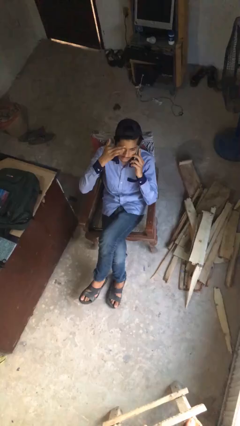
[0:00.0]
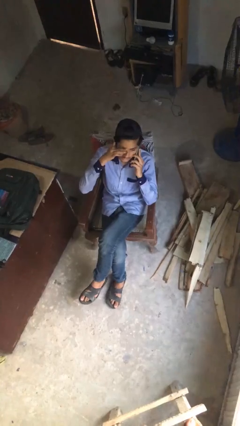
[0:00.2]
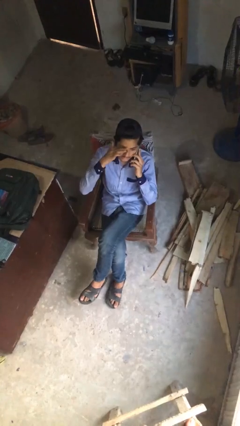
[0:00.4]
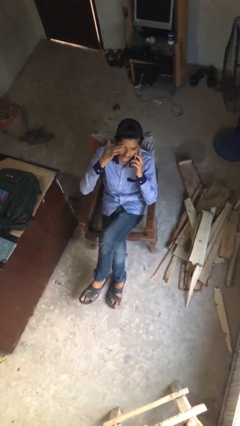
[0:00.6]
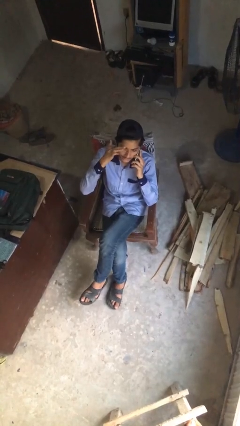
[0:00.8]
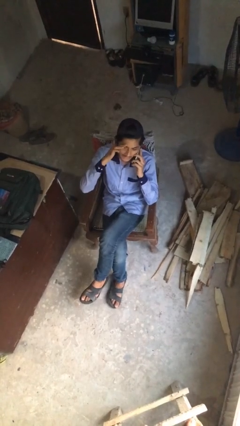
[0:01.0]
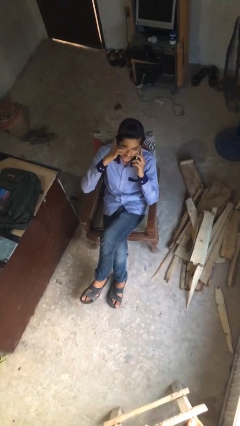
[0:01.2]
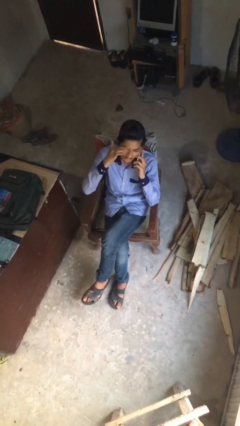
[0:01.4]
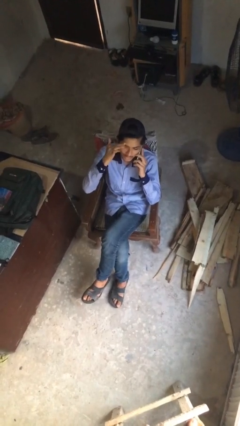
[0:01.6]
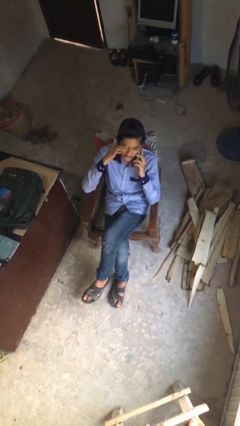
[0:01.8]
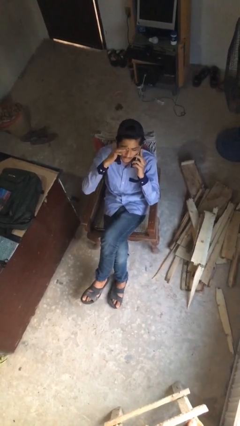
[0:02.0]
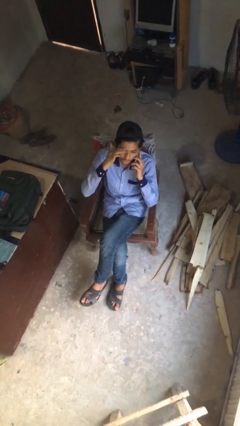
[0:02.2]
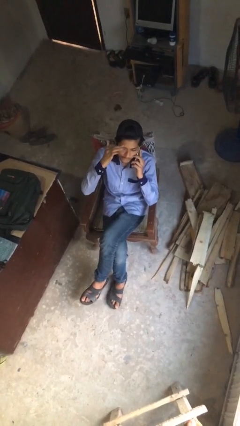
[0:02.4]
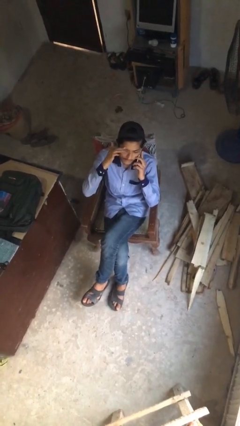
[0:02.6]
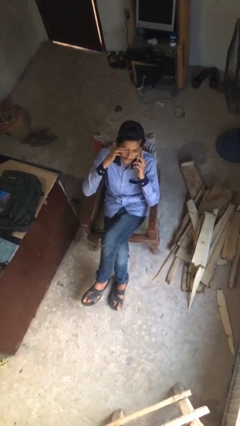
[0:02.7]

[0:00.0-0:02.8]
person talks on phone

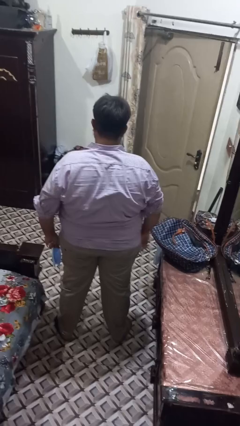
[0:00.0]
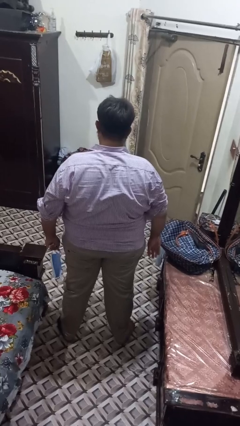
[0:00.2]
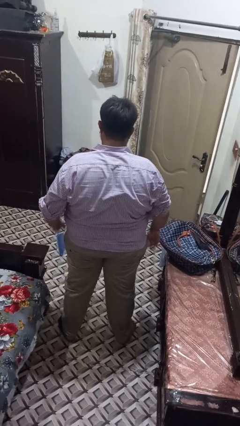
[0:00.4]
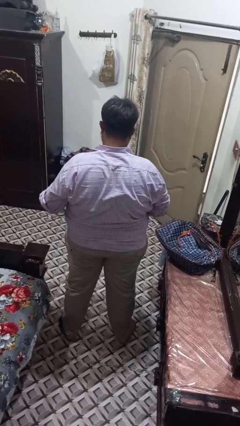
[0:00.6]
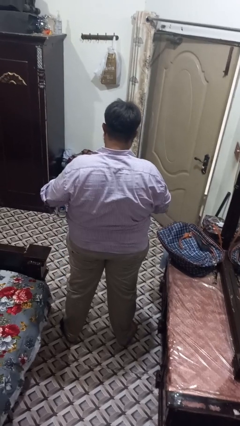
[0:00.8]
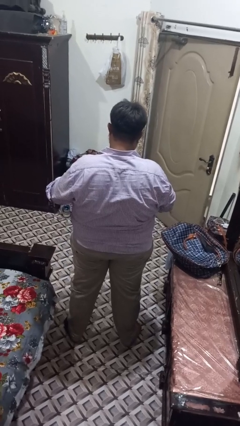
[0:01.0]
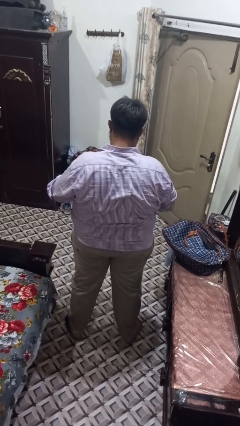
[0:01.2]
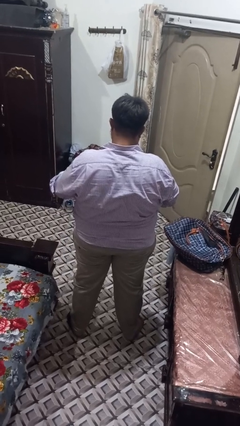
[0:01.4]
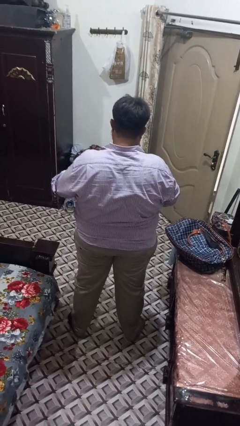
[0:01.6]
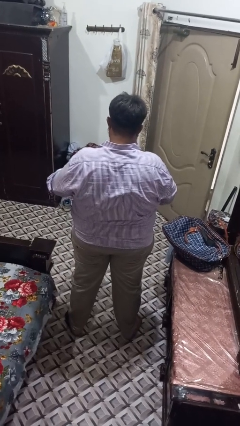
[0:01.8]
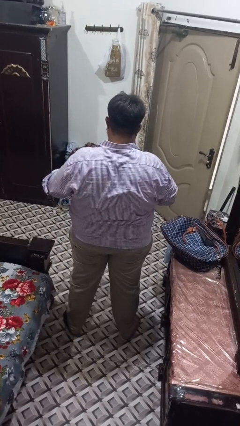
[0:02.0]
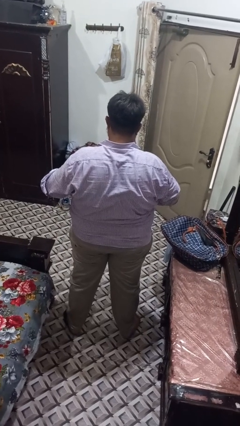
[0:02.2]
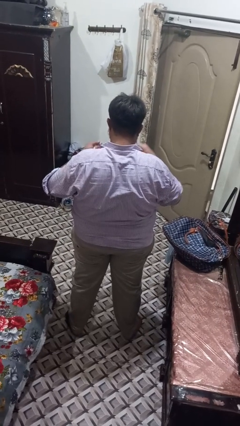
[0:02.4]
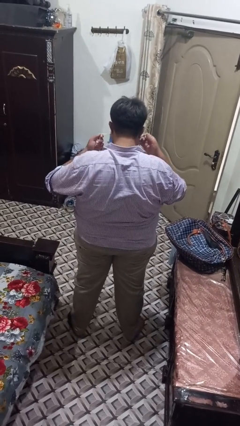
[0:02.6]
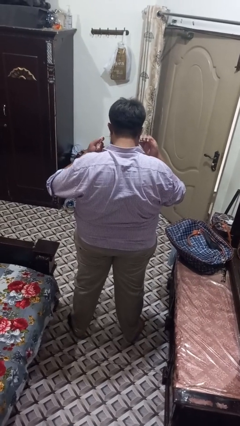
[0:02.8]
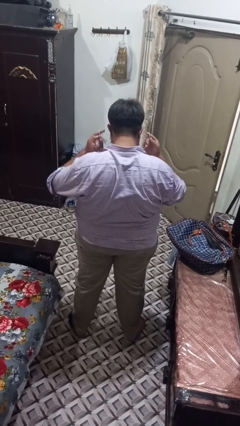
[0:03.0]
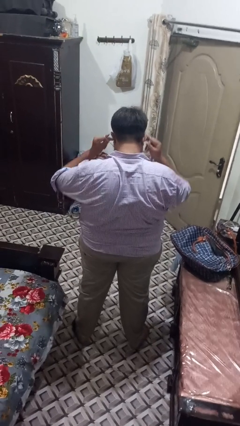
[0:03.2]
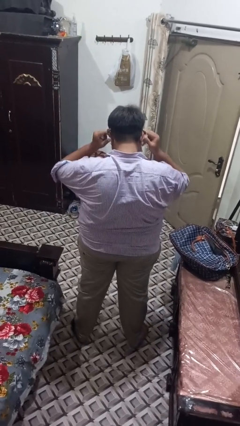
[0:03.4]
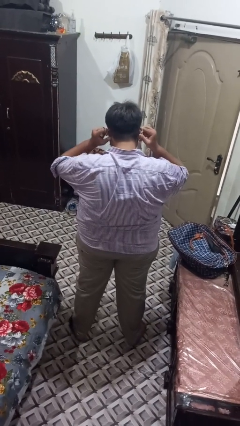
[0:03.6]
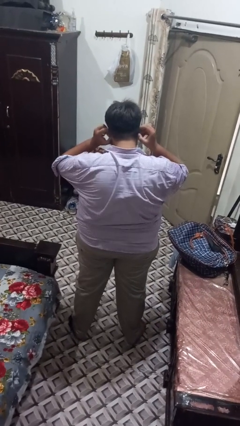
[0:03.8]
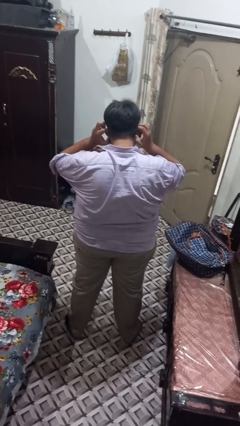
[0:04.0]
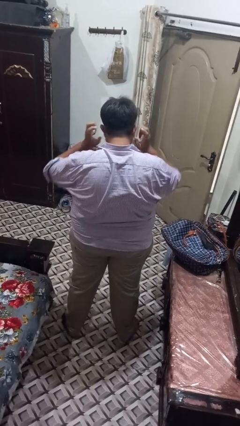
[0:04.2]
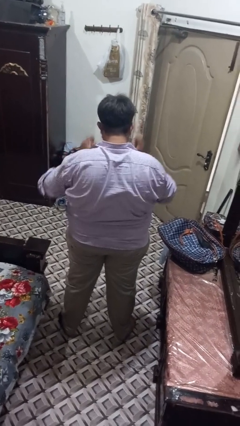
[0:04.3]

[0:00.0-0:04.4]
person puts on facemask

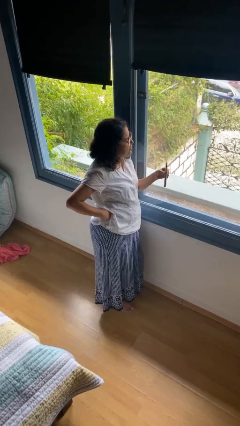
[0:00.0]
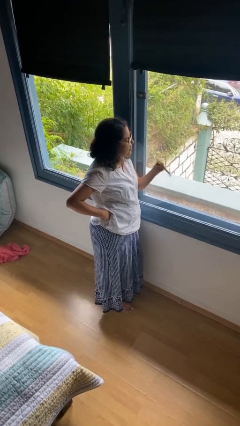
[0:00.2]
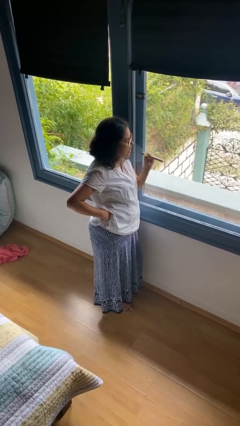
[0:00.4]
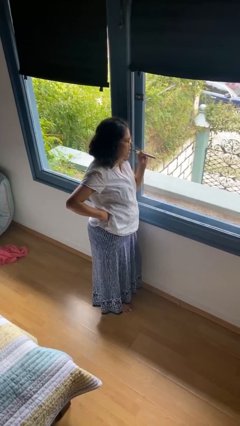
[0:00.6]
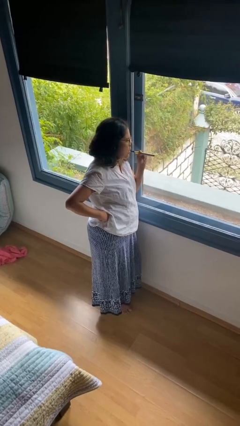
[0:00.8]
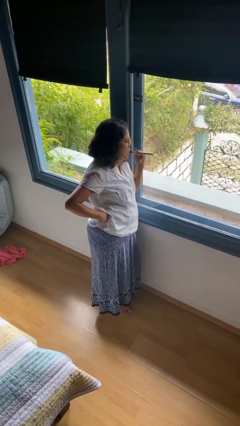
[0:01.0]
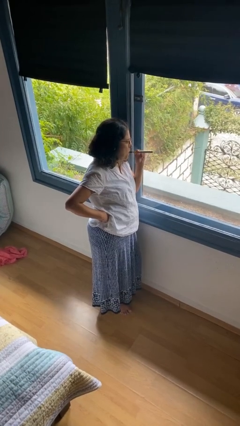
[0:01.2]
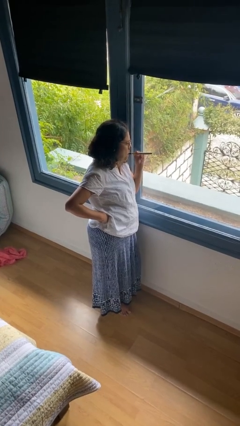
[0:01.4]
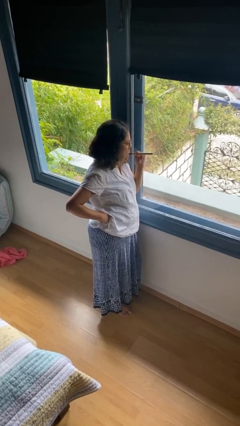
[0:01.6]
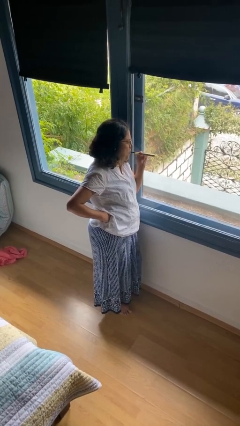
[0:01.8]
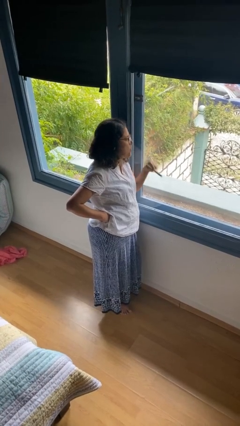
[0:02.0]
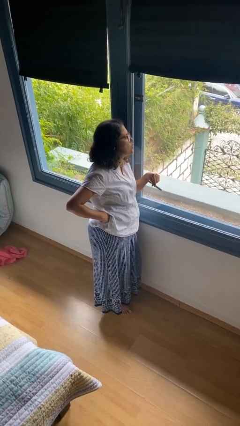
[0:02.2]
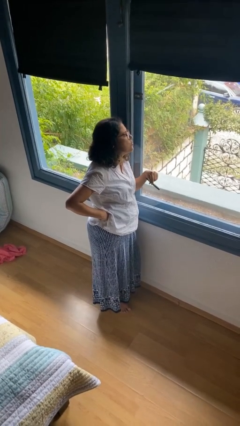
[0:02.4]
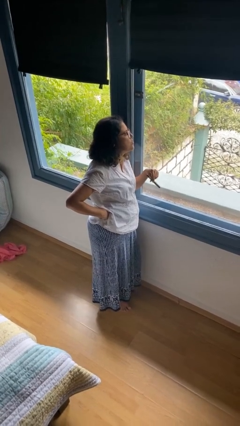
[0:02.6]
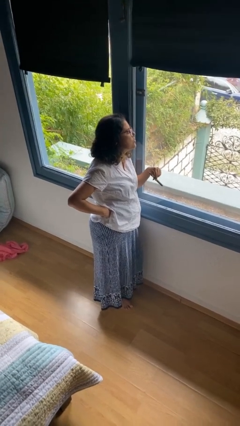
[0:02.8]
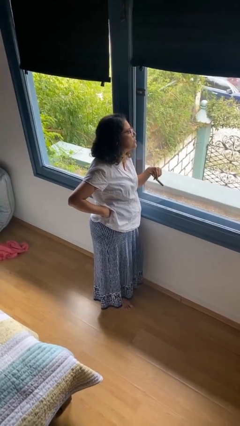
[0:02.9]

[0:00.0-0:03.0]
person vapes

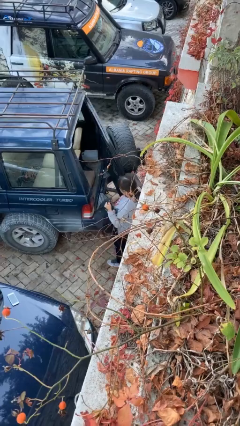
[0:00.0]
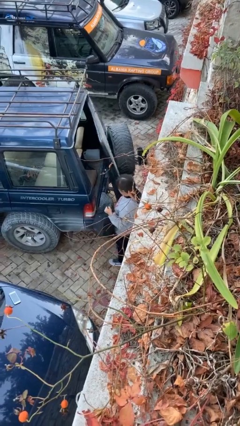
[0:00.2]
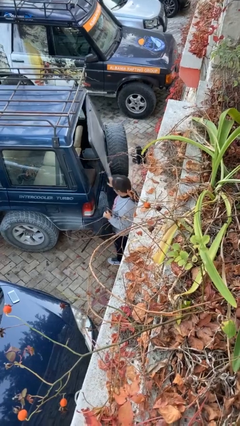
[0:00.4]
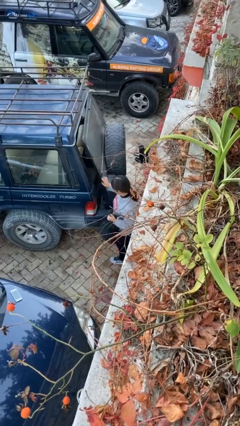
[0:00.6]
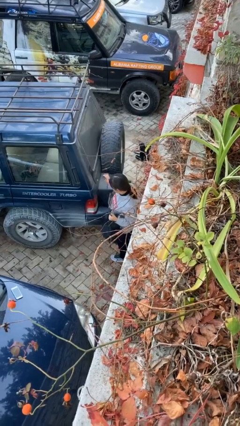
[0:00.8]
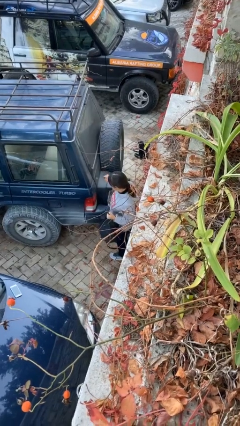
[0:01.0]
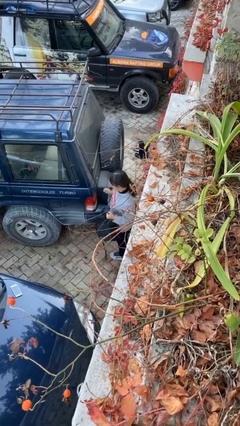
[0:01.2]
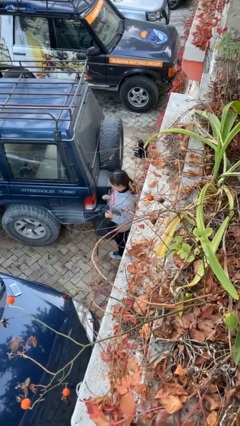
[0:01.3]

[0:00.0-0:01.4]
person closes car trunk

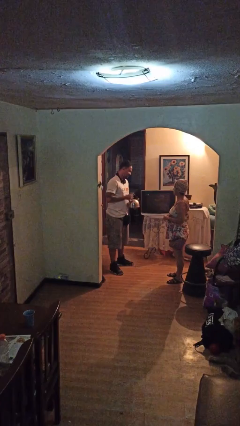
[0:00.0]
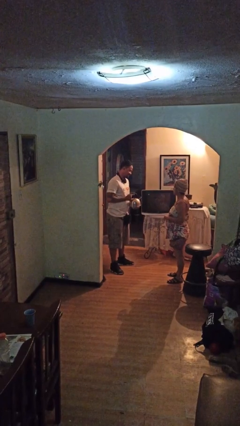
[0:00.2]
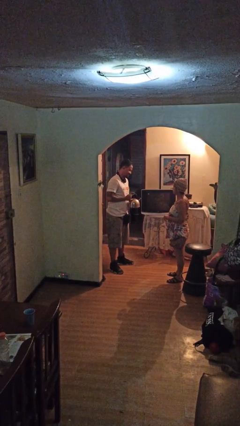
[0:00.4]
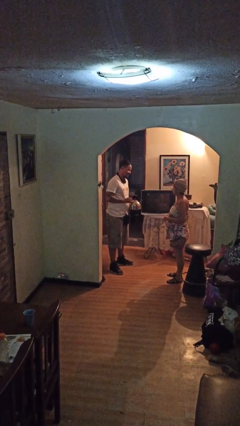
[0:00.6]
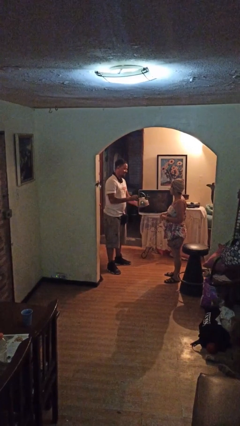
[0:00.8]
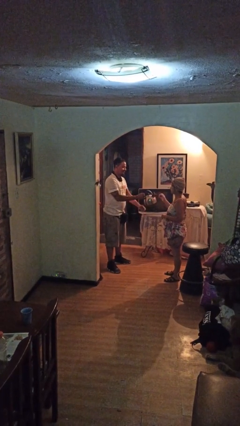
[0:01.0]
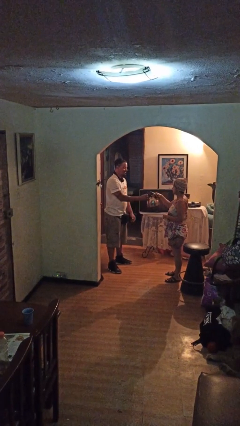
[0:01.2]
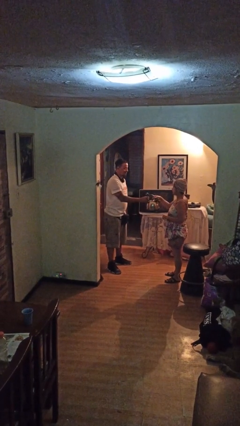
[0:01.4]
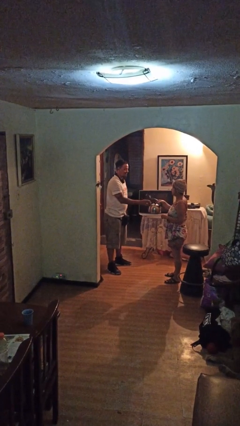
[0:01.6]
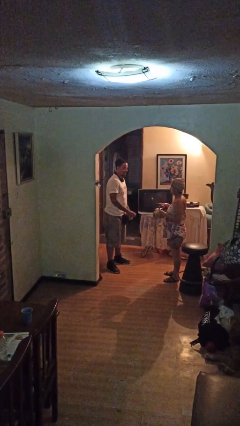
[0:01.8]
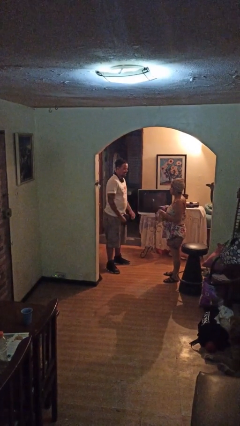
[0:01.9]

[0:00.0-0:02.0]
person transfers object to person

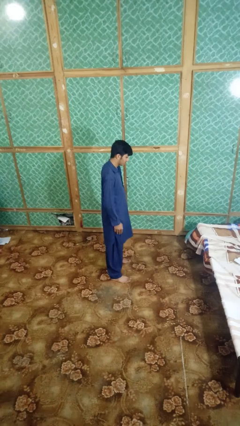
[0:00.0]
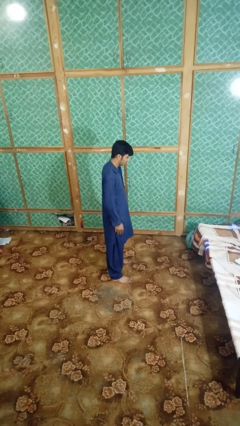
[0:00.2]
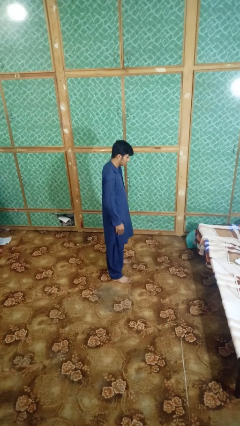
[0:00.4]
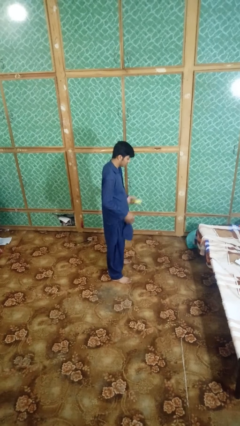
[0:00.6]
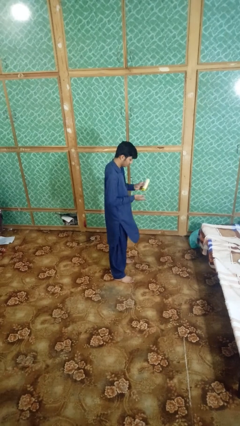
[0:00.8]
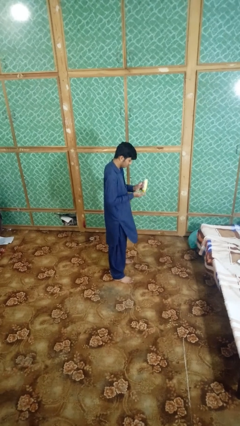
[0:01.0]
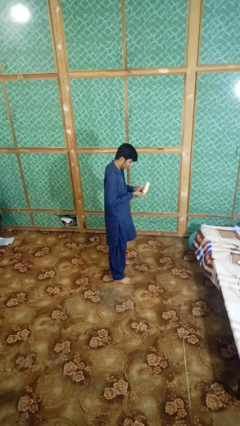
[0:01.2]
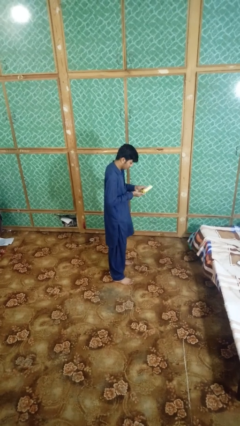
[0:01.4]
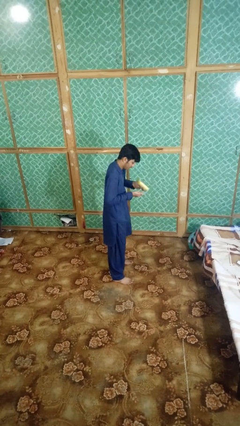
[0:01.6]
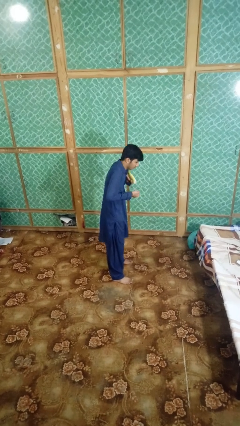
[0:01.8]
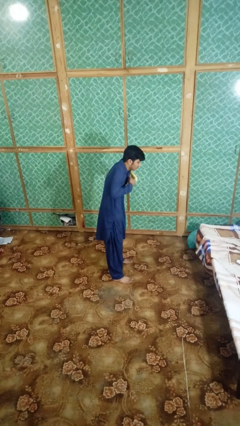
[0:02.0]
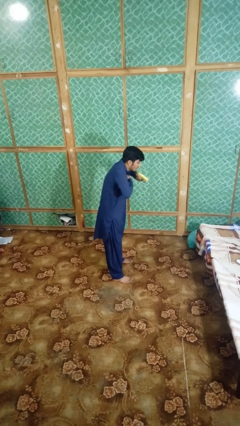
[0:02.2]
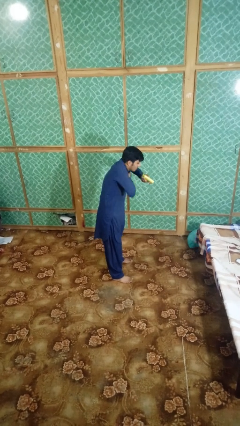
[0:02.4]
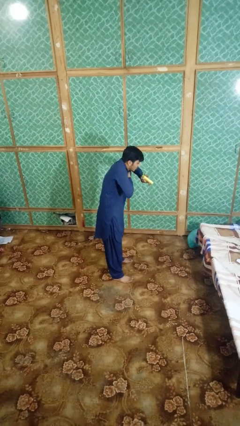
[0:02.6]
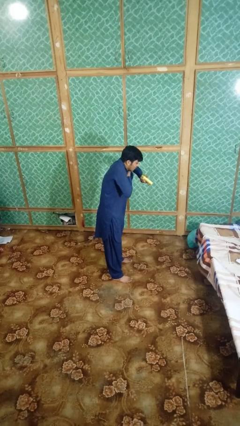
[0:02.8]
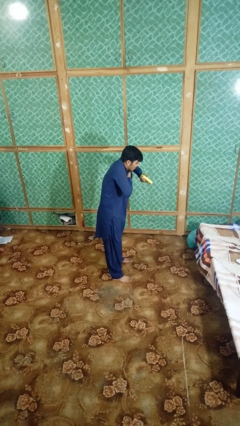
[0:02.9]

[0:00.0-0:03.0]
person applies deodorant

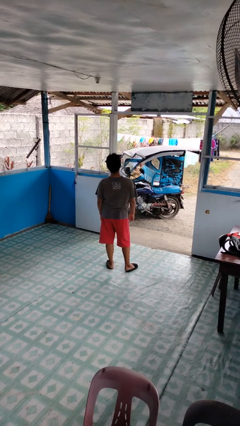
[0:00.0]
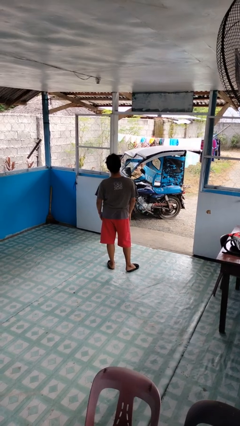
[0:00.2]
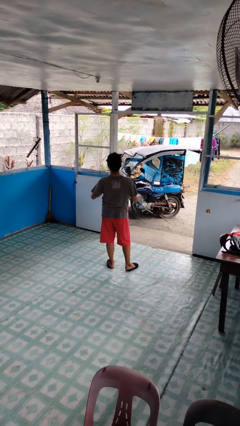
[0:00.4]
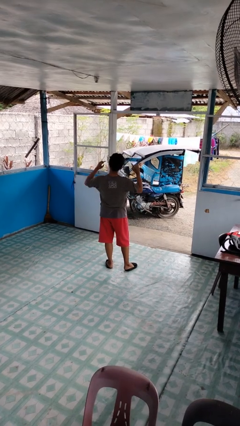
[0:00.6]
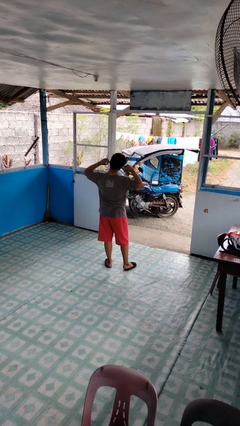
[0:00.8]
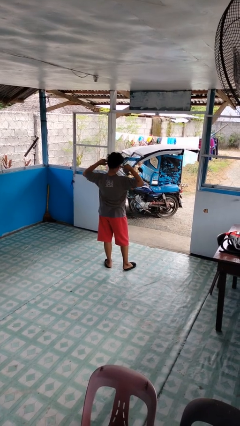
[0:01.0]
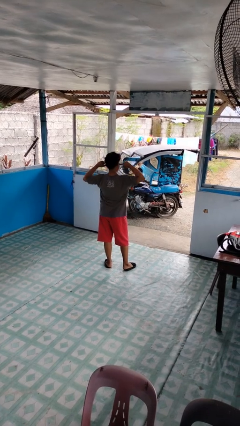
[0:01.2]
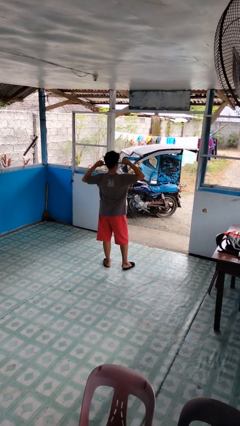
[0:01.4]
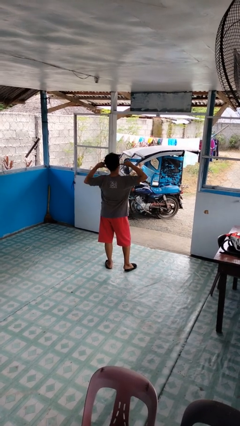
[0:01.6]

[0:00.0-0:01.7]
person puts fingers in ear
